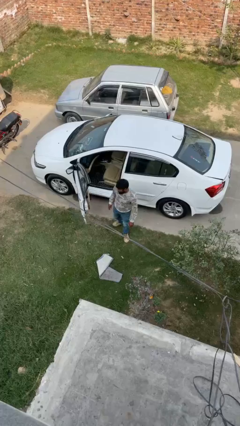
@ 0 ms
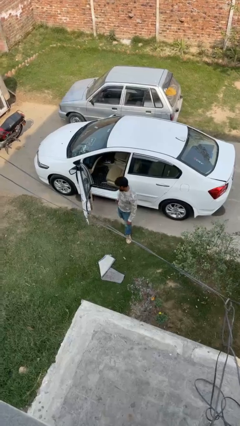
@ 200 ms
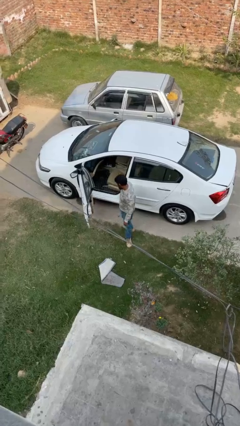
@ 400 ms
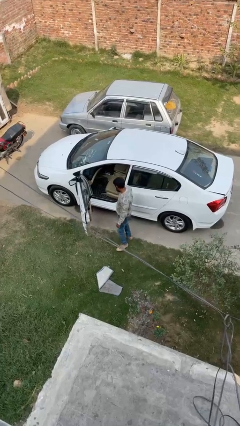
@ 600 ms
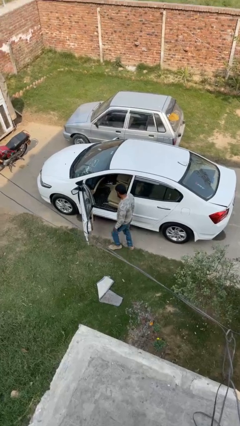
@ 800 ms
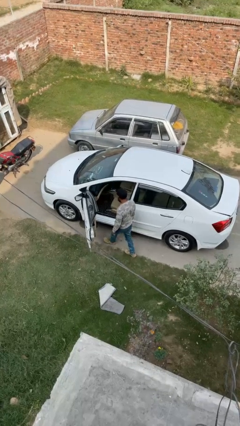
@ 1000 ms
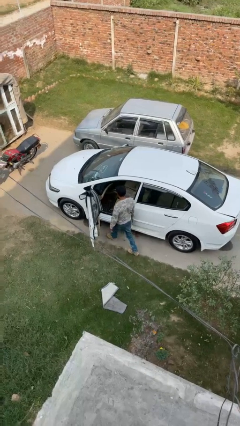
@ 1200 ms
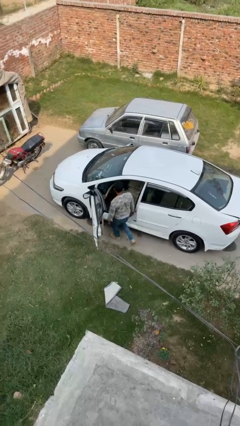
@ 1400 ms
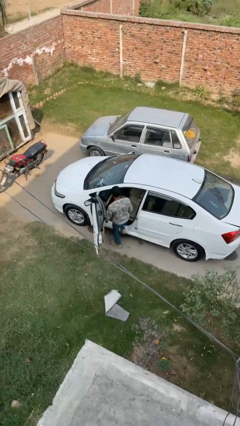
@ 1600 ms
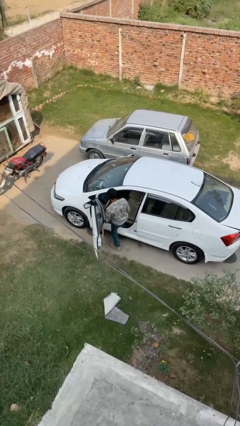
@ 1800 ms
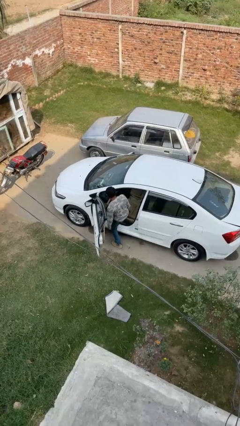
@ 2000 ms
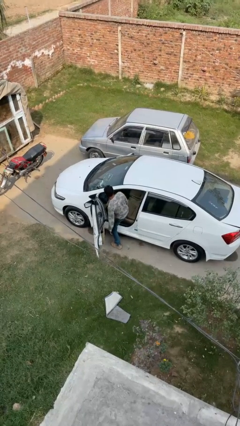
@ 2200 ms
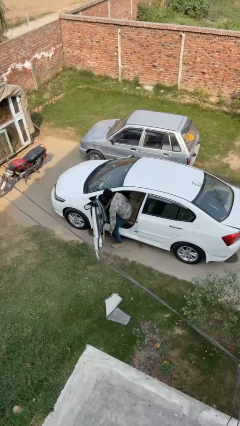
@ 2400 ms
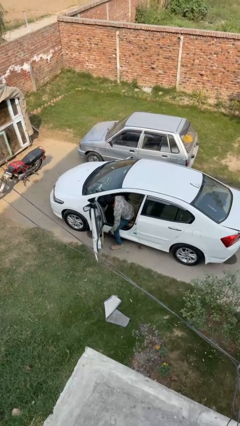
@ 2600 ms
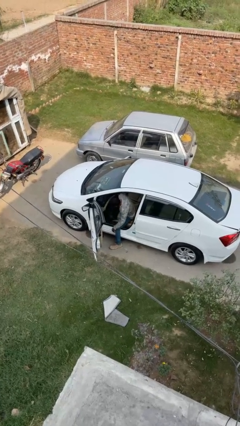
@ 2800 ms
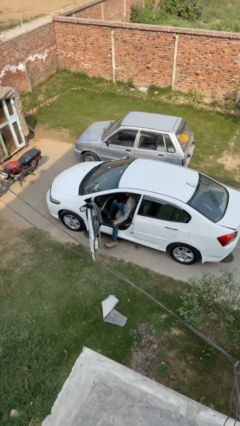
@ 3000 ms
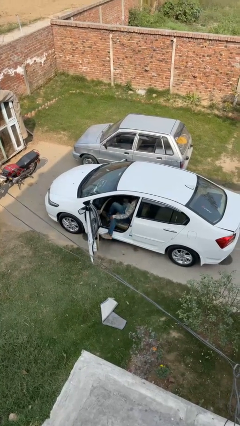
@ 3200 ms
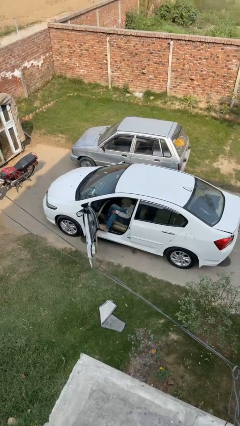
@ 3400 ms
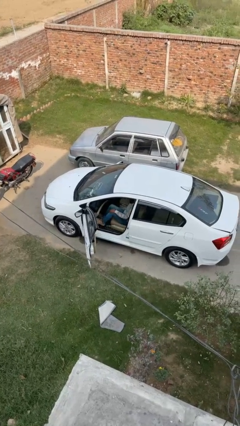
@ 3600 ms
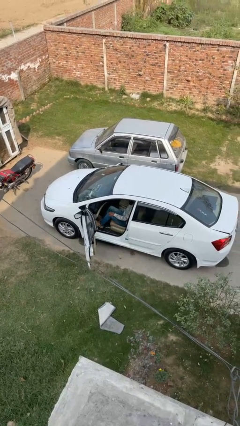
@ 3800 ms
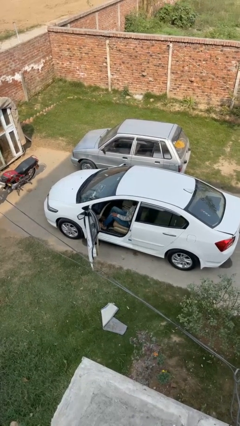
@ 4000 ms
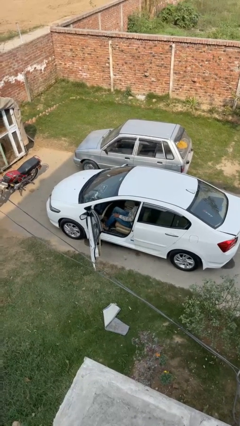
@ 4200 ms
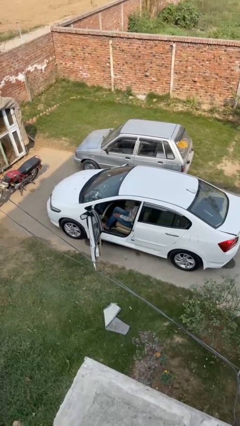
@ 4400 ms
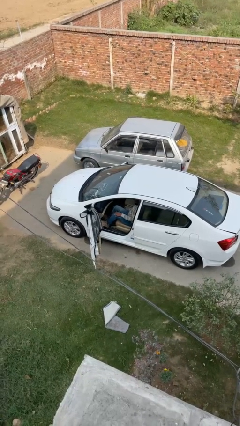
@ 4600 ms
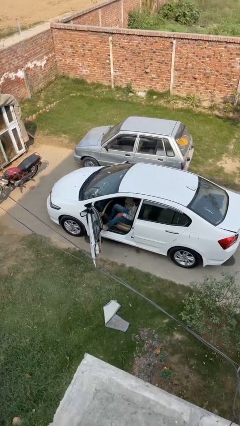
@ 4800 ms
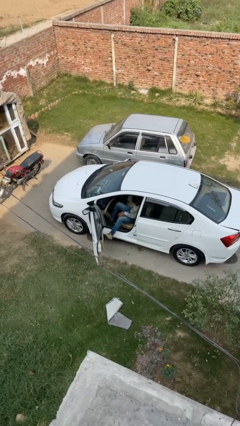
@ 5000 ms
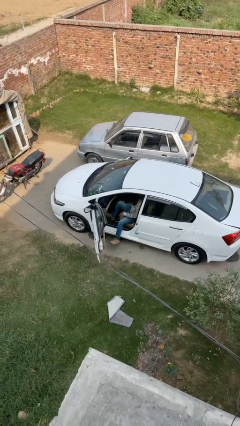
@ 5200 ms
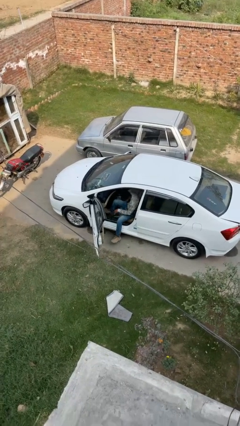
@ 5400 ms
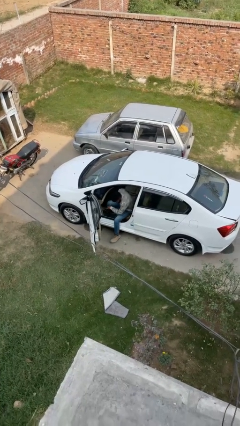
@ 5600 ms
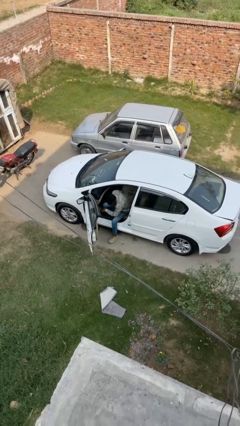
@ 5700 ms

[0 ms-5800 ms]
person enters car

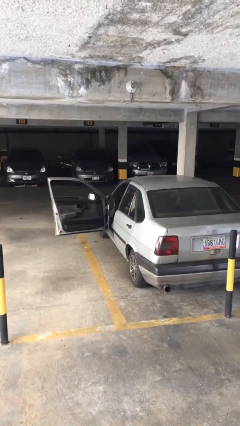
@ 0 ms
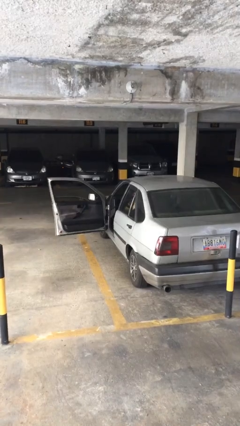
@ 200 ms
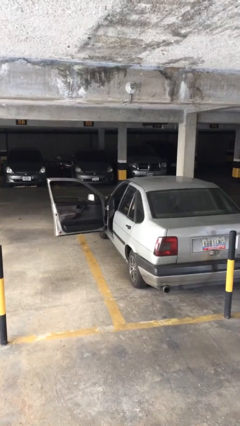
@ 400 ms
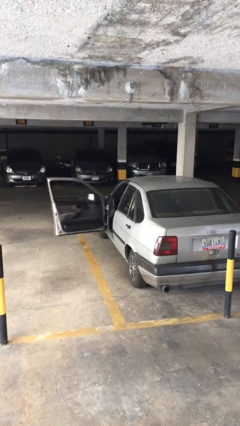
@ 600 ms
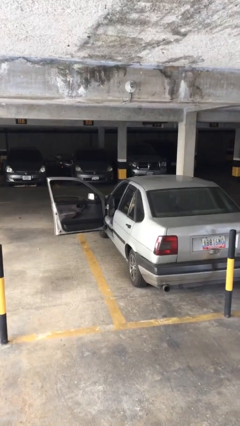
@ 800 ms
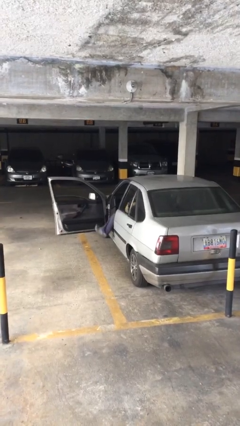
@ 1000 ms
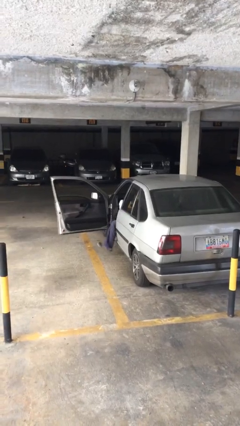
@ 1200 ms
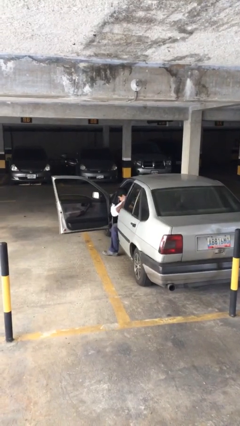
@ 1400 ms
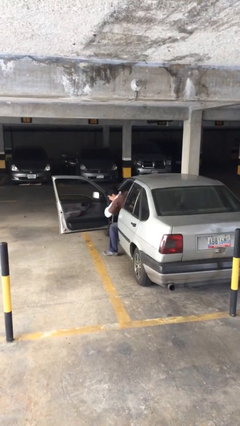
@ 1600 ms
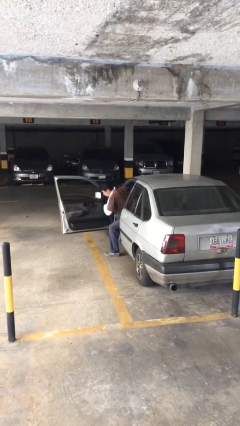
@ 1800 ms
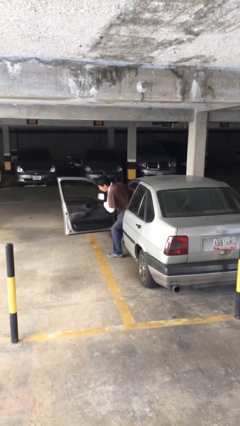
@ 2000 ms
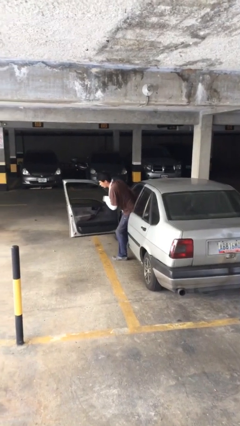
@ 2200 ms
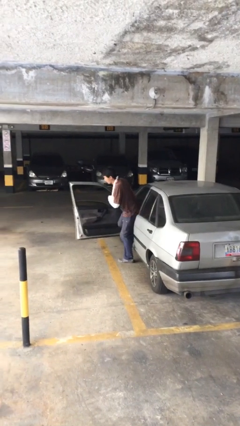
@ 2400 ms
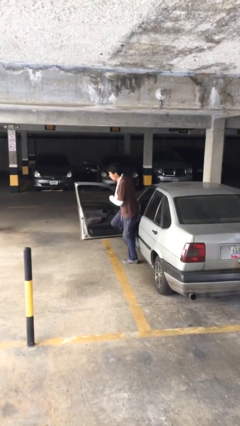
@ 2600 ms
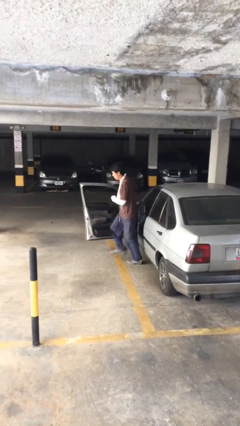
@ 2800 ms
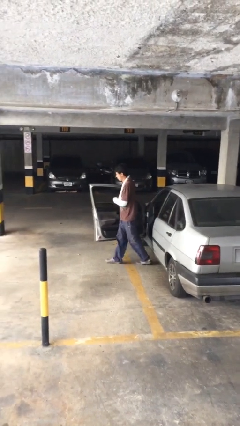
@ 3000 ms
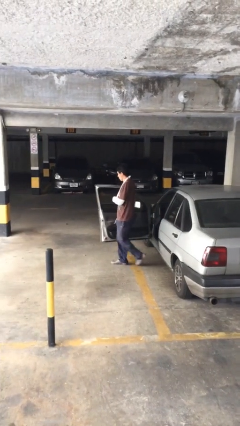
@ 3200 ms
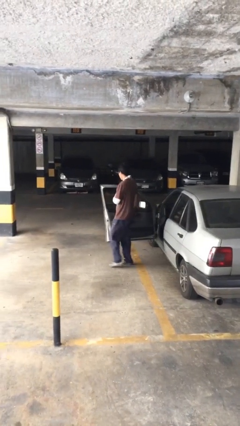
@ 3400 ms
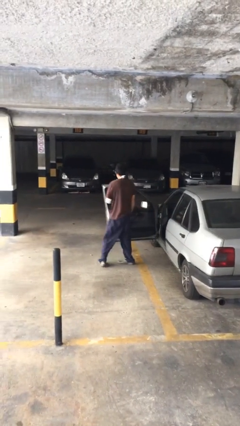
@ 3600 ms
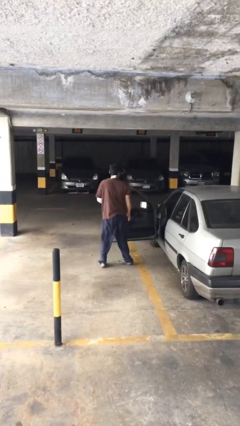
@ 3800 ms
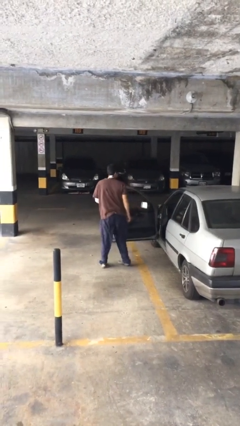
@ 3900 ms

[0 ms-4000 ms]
person exits car

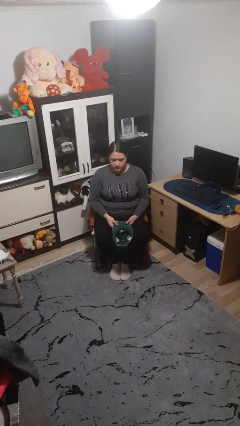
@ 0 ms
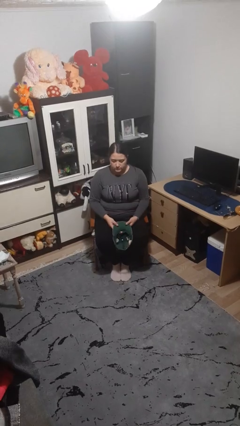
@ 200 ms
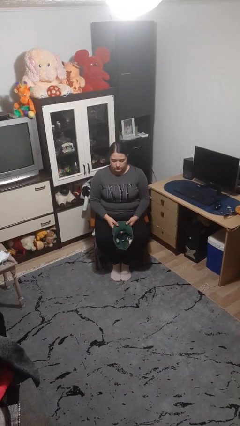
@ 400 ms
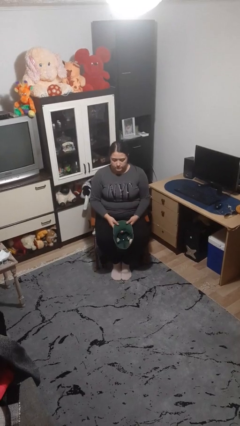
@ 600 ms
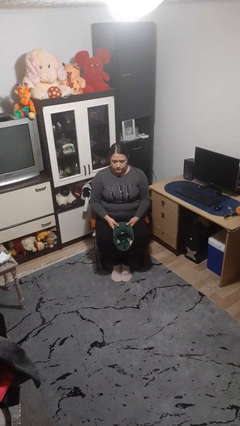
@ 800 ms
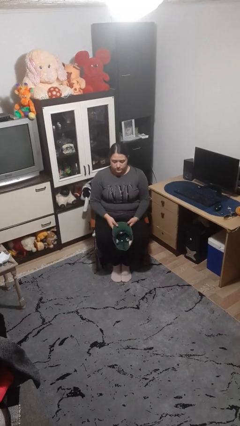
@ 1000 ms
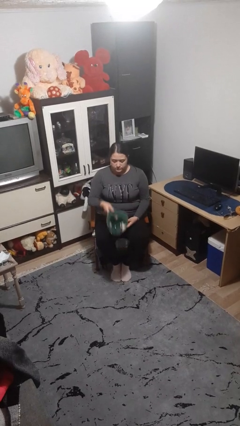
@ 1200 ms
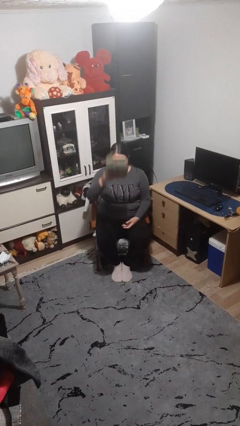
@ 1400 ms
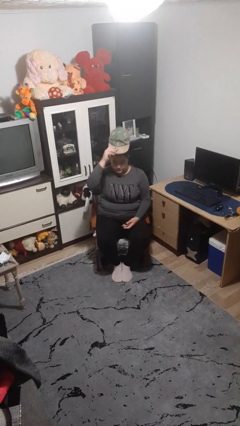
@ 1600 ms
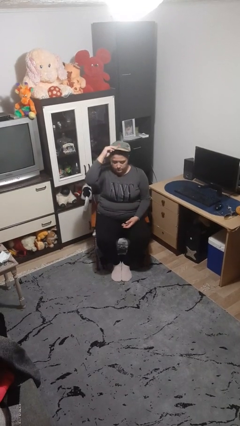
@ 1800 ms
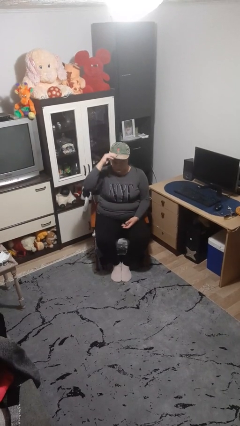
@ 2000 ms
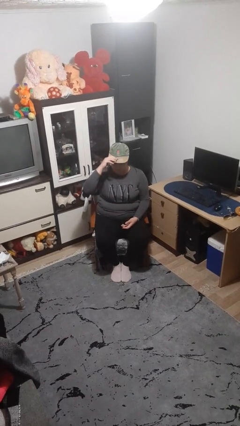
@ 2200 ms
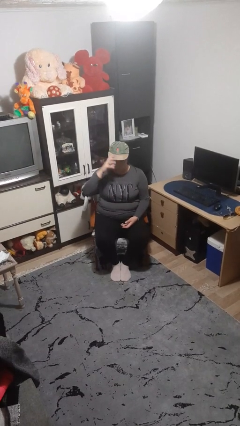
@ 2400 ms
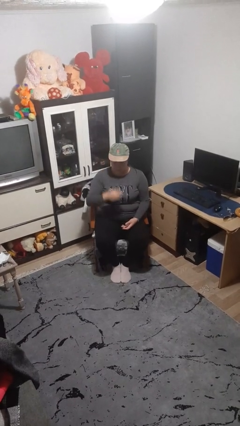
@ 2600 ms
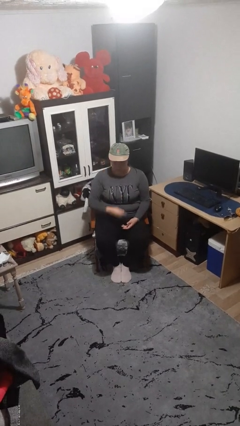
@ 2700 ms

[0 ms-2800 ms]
person puts on hat

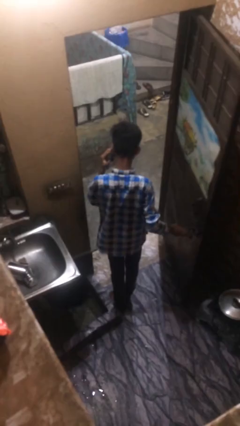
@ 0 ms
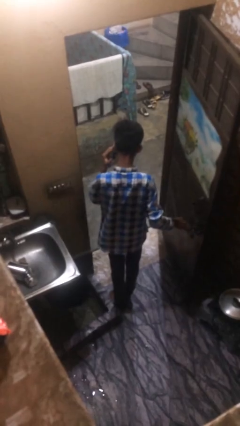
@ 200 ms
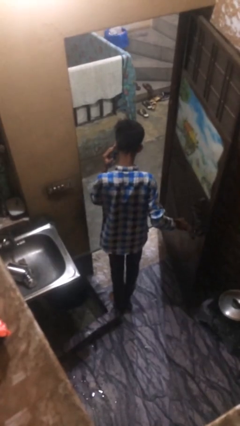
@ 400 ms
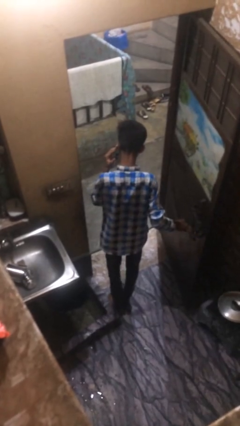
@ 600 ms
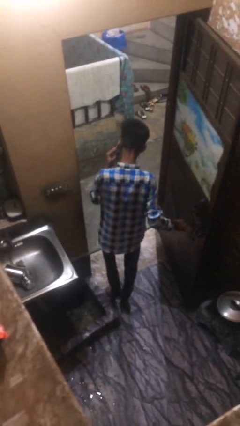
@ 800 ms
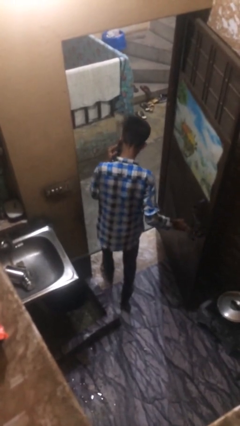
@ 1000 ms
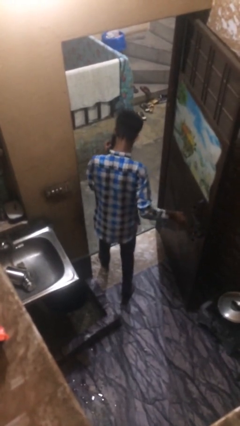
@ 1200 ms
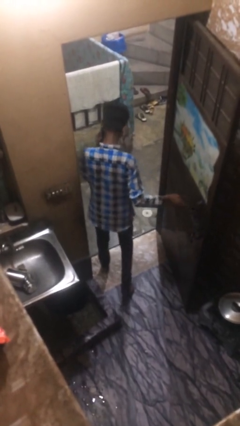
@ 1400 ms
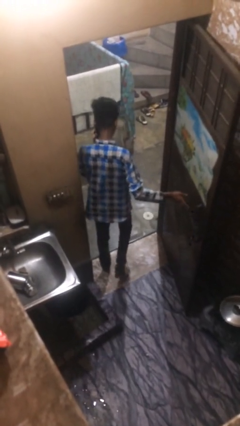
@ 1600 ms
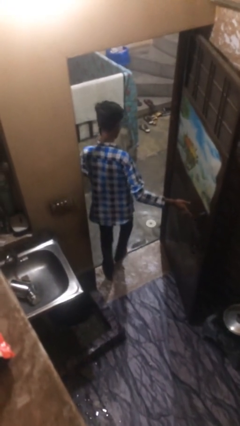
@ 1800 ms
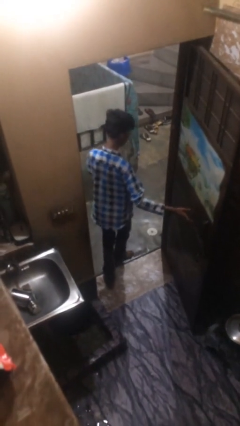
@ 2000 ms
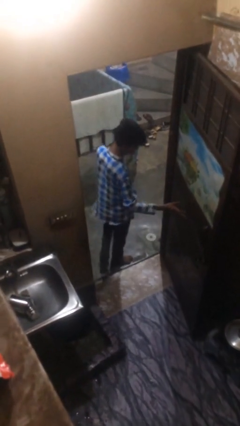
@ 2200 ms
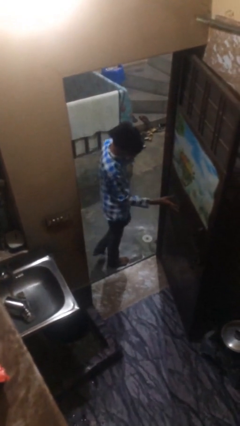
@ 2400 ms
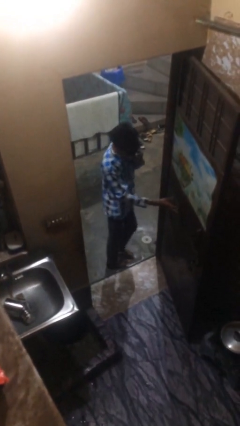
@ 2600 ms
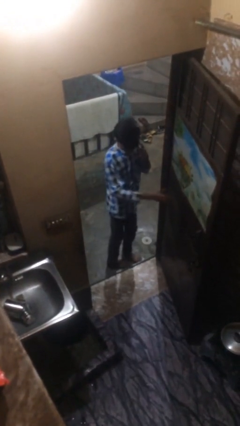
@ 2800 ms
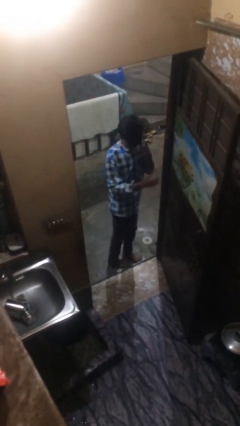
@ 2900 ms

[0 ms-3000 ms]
person exits scene through structure

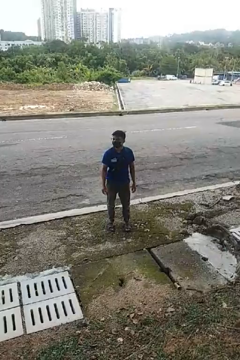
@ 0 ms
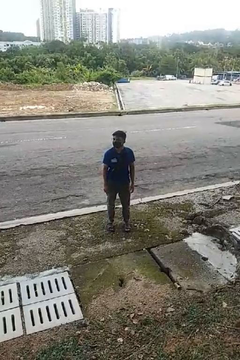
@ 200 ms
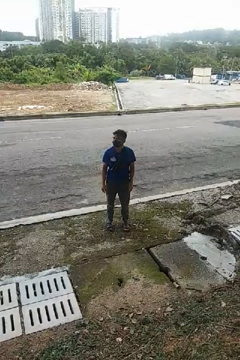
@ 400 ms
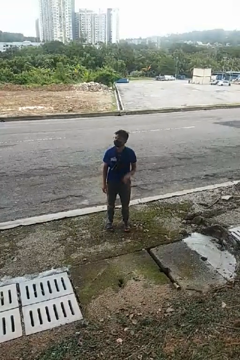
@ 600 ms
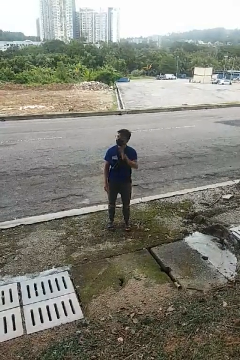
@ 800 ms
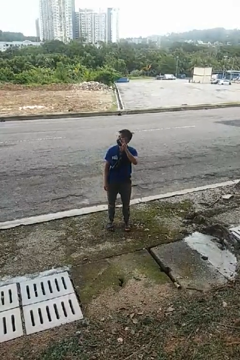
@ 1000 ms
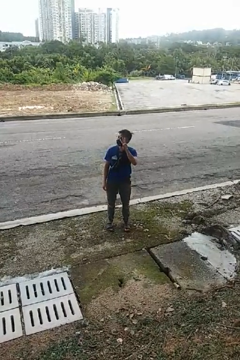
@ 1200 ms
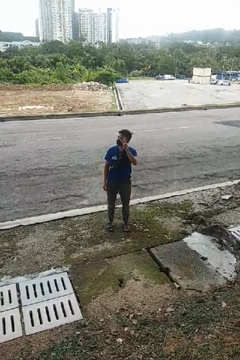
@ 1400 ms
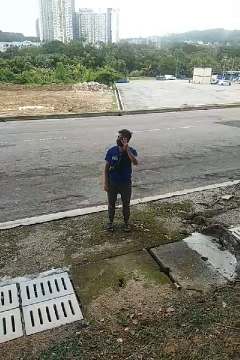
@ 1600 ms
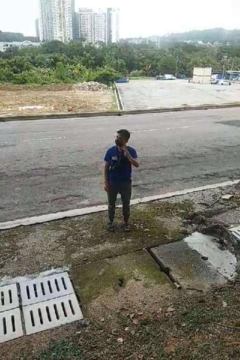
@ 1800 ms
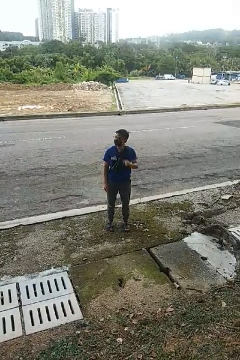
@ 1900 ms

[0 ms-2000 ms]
person gestures number three
